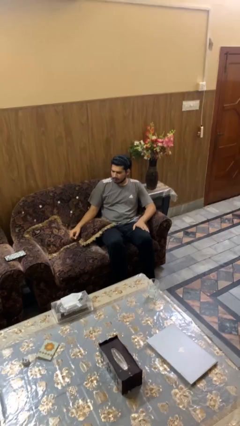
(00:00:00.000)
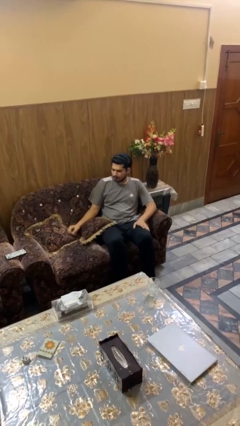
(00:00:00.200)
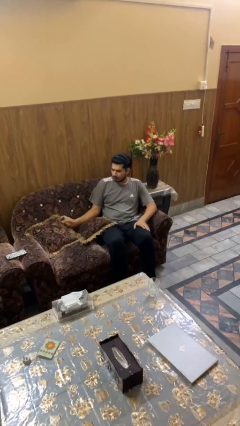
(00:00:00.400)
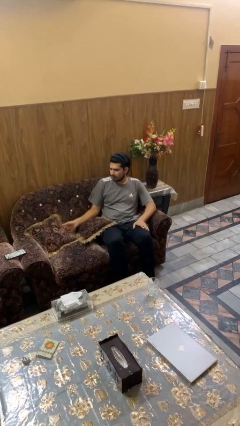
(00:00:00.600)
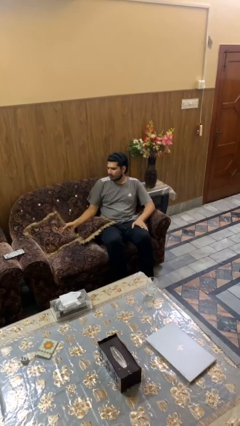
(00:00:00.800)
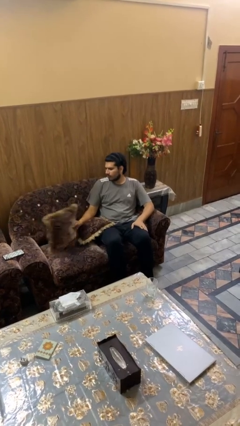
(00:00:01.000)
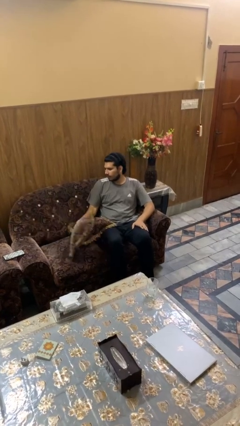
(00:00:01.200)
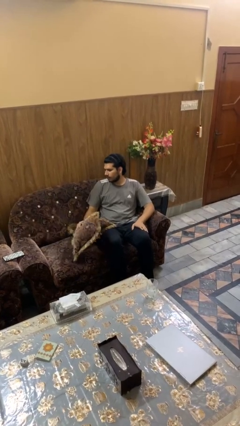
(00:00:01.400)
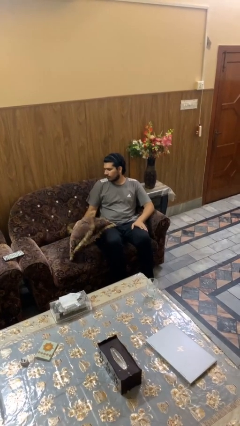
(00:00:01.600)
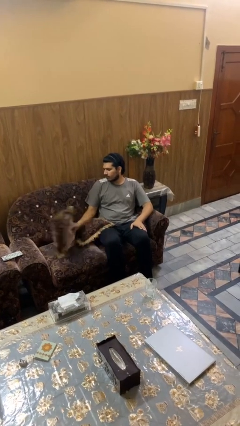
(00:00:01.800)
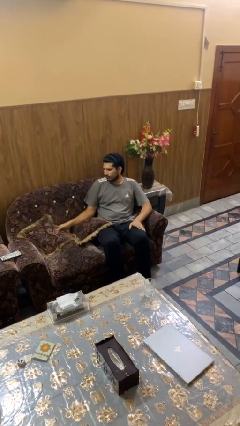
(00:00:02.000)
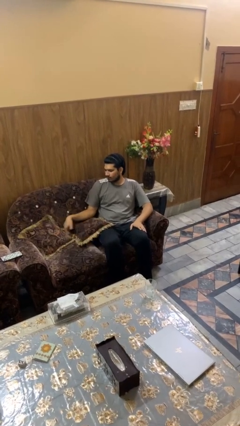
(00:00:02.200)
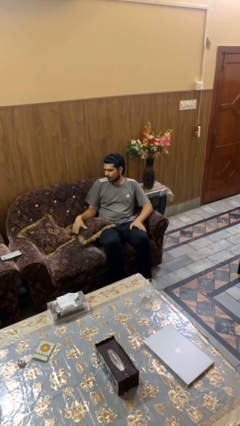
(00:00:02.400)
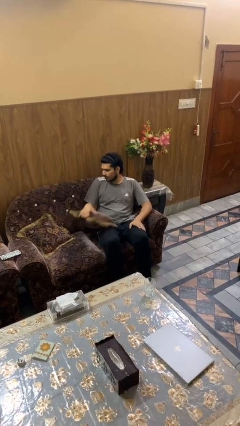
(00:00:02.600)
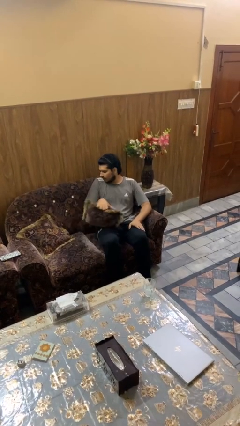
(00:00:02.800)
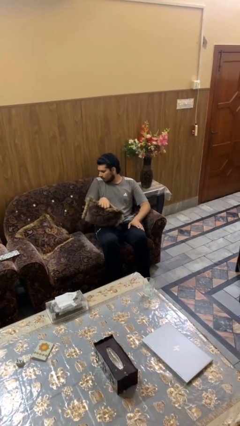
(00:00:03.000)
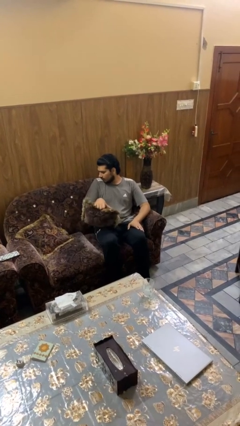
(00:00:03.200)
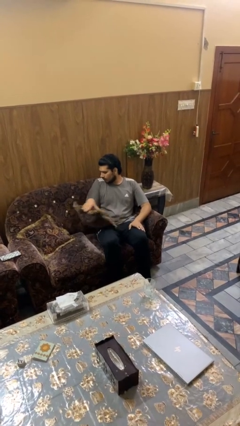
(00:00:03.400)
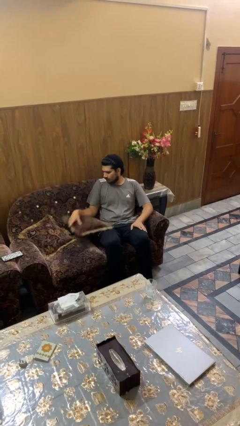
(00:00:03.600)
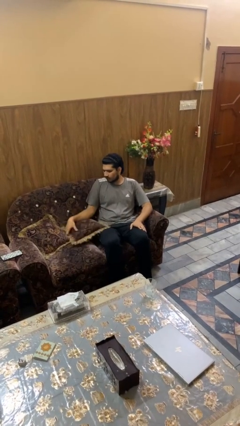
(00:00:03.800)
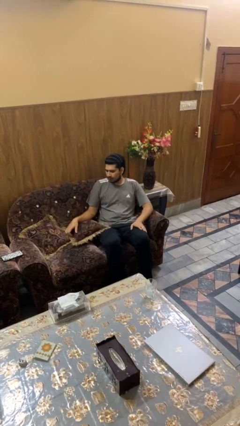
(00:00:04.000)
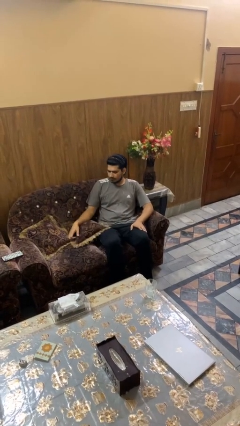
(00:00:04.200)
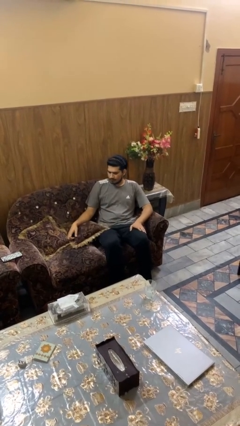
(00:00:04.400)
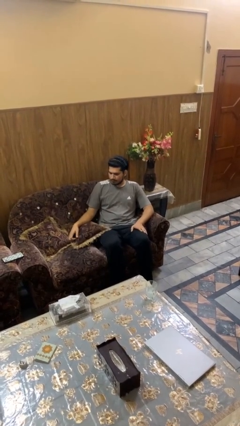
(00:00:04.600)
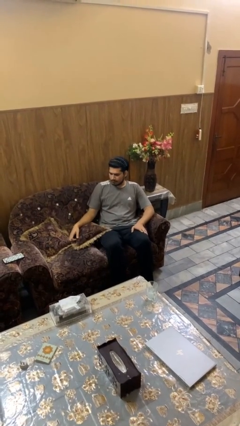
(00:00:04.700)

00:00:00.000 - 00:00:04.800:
person searches in couch

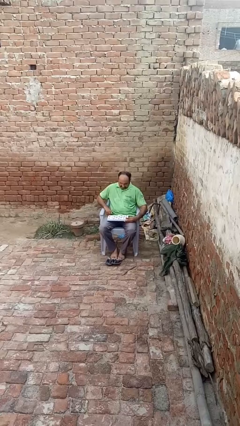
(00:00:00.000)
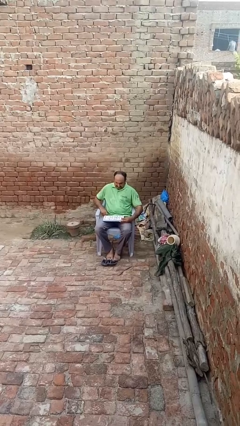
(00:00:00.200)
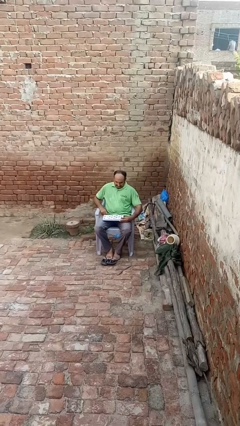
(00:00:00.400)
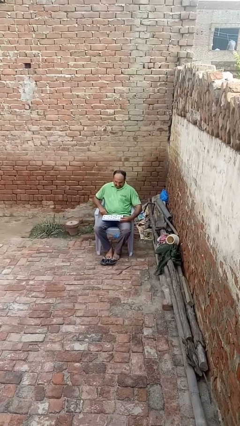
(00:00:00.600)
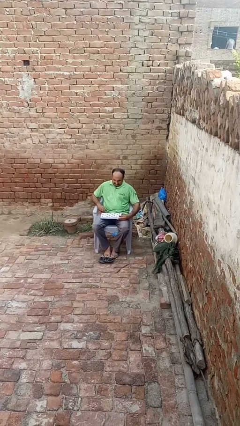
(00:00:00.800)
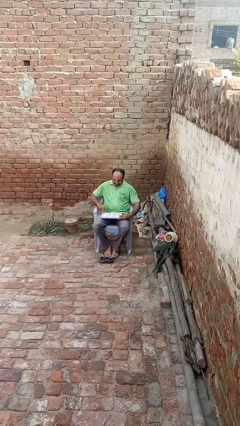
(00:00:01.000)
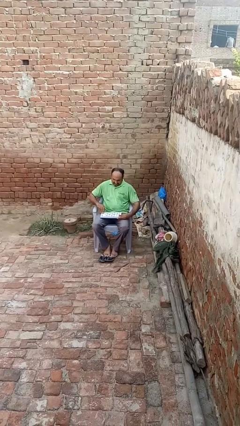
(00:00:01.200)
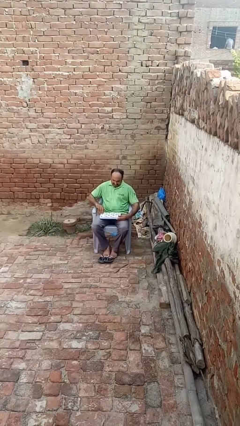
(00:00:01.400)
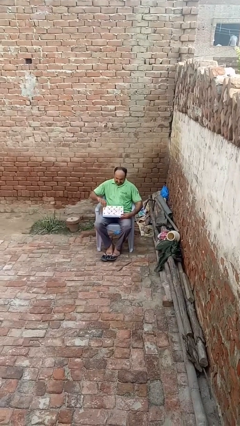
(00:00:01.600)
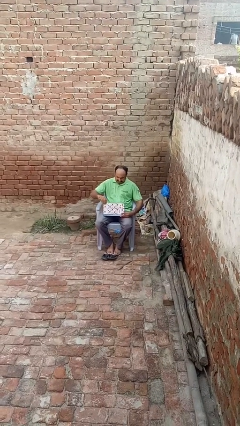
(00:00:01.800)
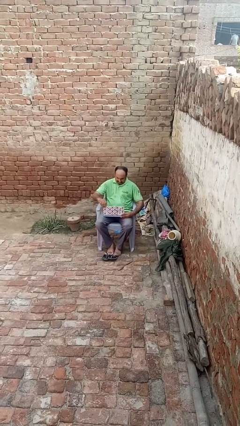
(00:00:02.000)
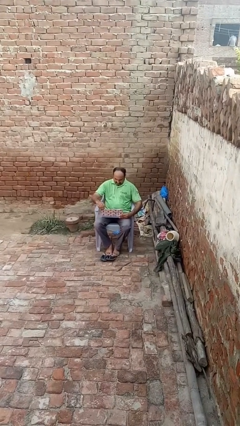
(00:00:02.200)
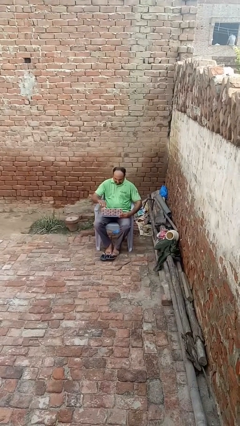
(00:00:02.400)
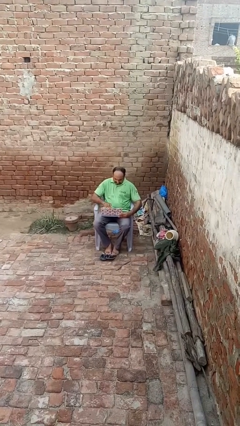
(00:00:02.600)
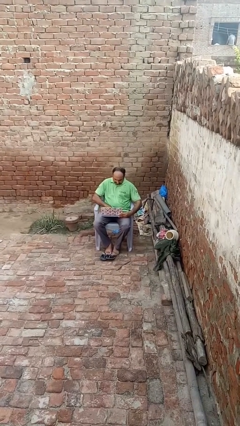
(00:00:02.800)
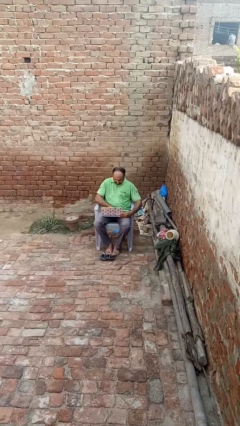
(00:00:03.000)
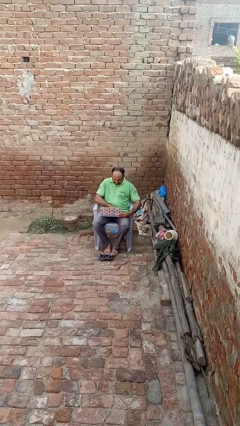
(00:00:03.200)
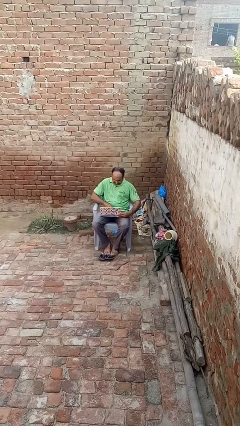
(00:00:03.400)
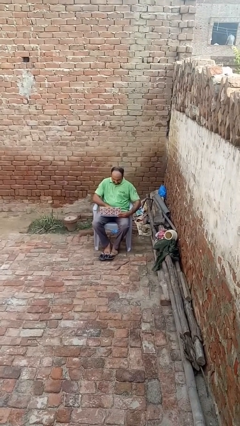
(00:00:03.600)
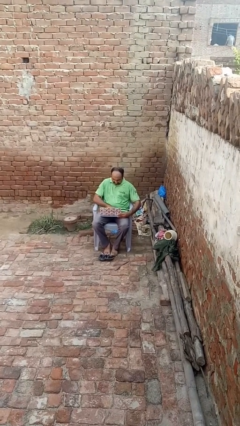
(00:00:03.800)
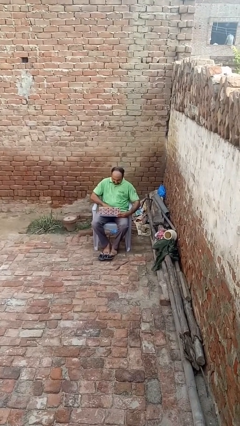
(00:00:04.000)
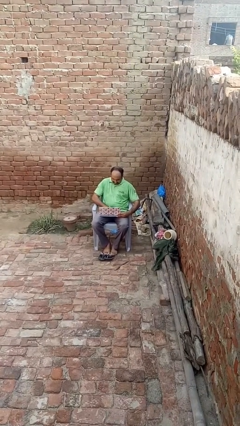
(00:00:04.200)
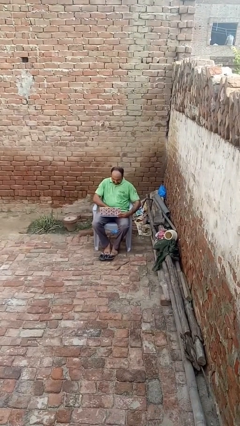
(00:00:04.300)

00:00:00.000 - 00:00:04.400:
person opens laptop

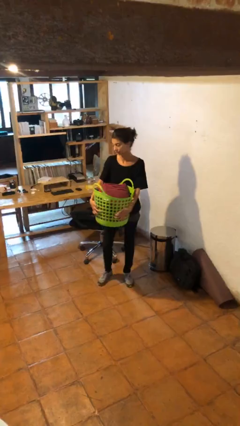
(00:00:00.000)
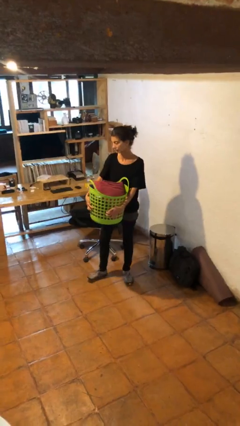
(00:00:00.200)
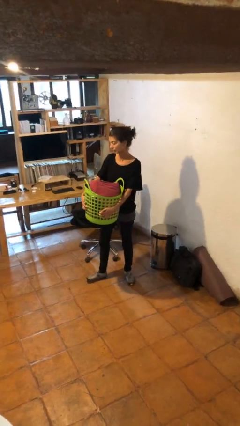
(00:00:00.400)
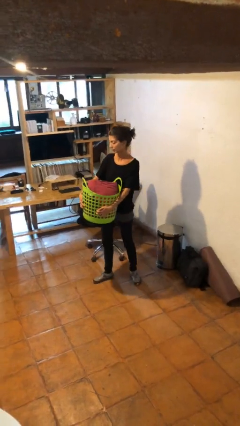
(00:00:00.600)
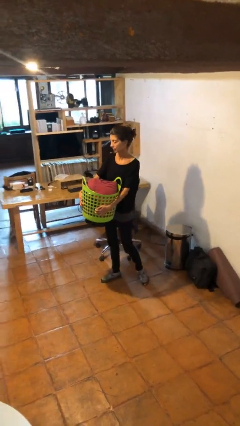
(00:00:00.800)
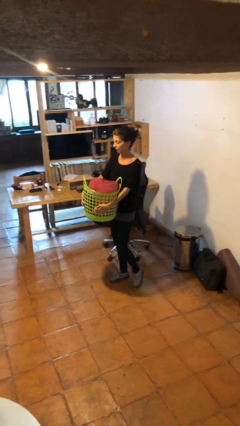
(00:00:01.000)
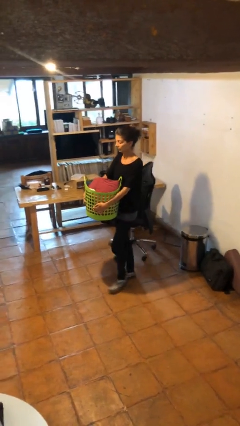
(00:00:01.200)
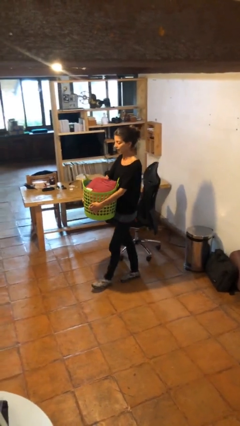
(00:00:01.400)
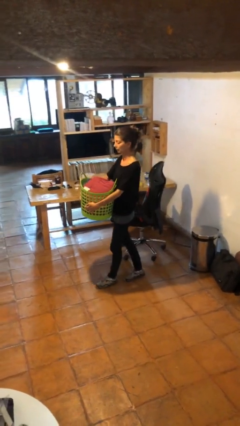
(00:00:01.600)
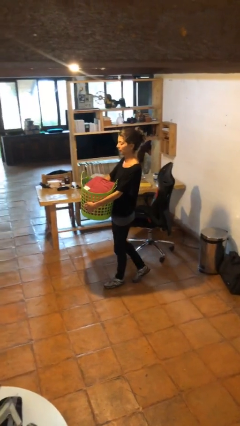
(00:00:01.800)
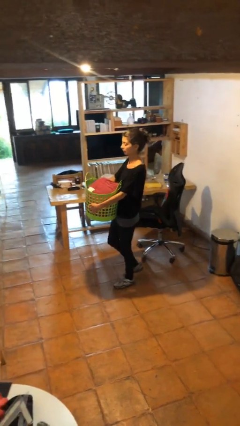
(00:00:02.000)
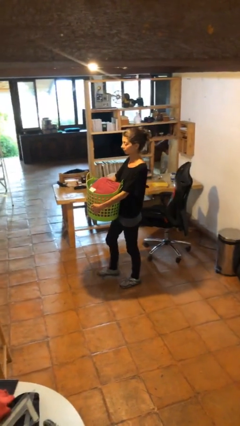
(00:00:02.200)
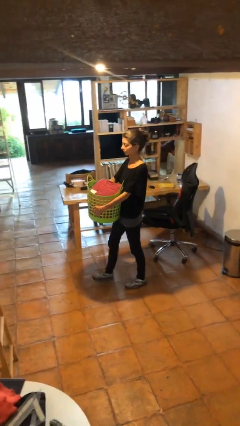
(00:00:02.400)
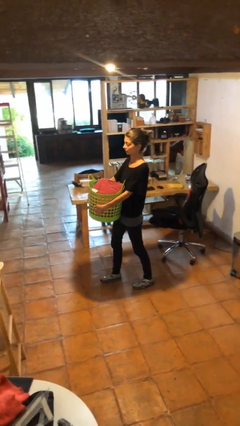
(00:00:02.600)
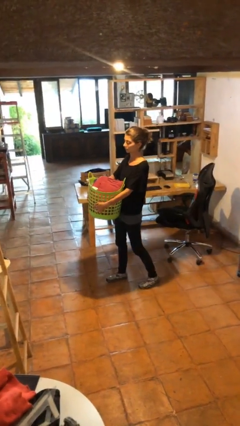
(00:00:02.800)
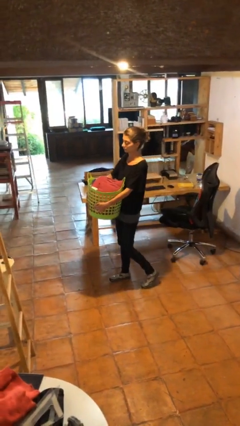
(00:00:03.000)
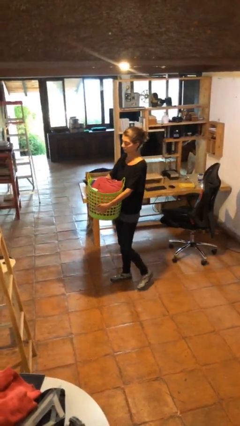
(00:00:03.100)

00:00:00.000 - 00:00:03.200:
person carries laundry basket

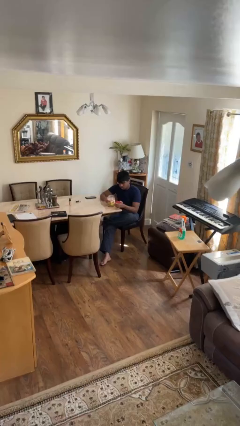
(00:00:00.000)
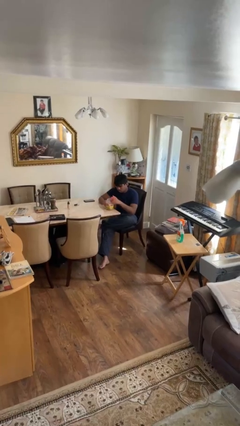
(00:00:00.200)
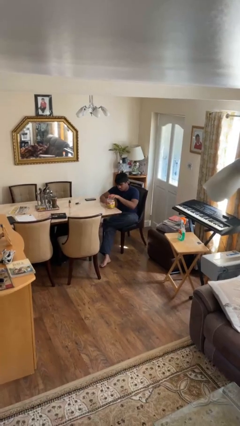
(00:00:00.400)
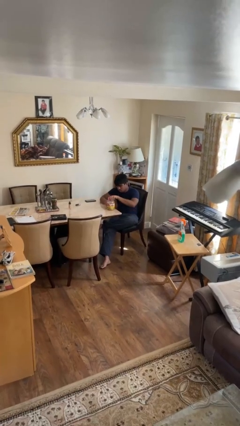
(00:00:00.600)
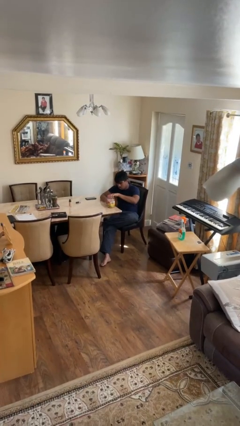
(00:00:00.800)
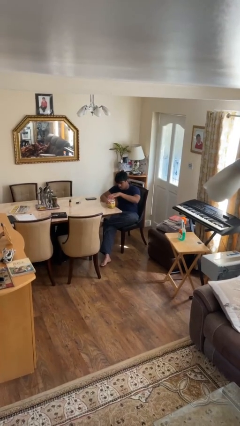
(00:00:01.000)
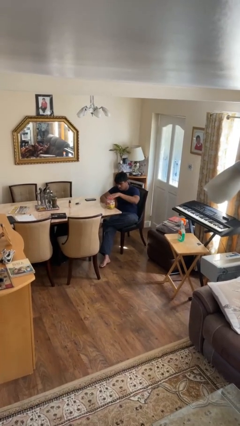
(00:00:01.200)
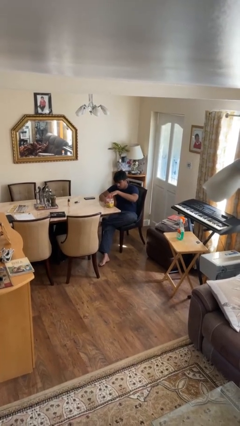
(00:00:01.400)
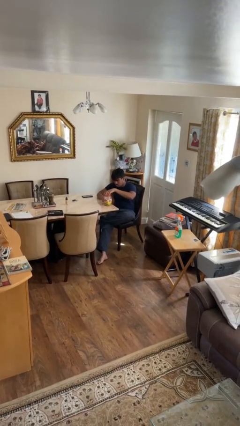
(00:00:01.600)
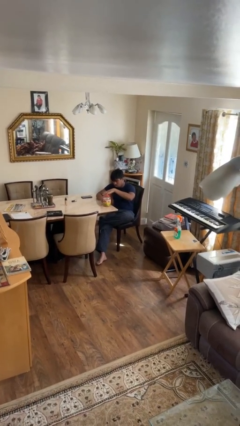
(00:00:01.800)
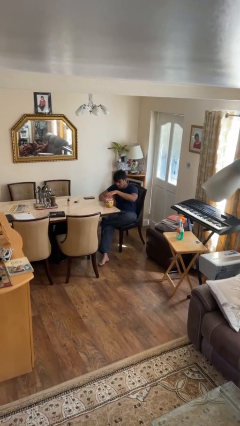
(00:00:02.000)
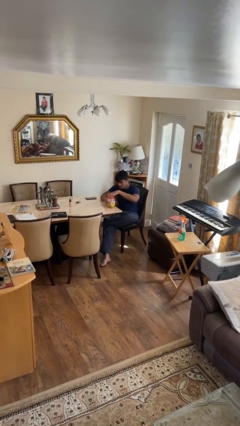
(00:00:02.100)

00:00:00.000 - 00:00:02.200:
person closes jar

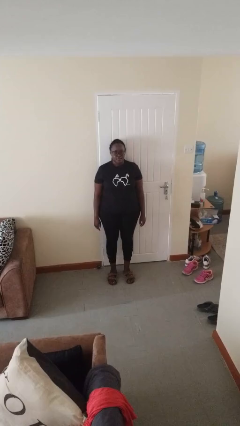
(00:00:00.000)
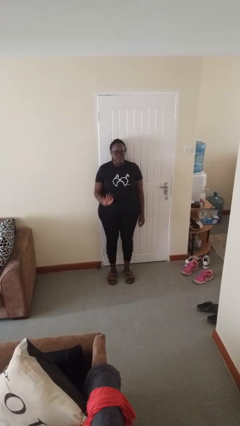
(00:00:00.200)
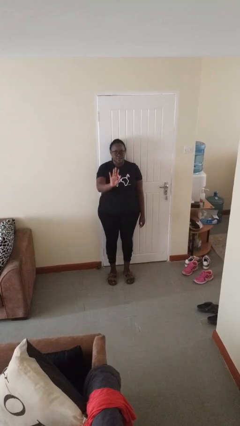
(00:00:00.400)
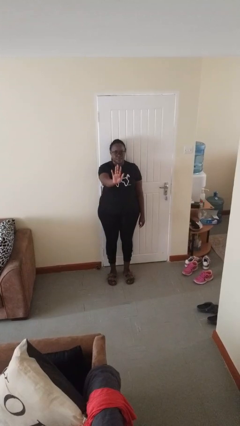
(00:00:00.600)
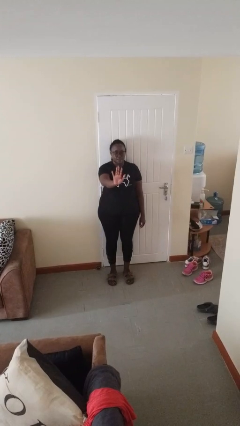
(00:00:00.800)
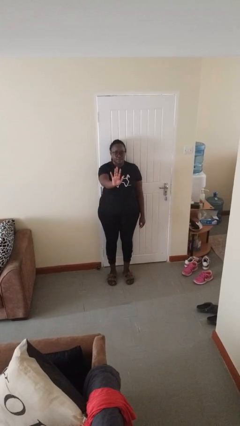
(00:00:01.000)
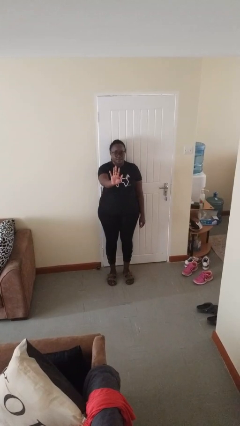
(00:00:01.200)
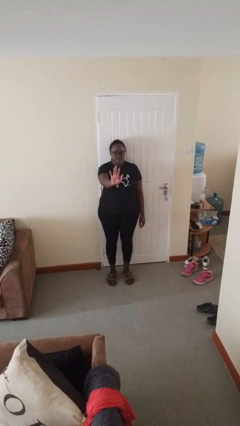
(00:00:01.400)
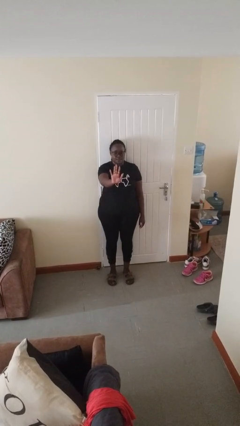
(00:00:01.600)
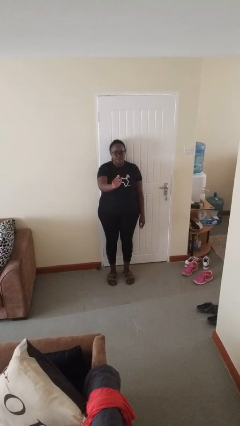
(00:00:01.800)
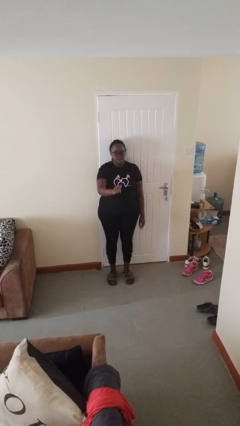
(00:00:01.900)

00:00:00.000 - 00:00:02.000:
person gestures number five

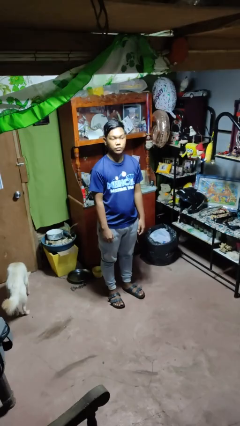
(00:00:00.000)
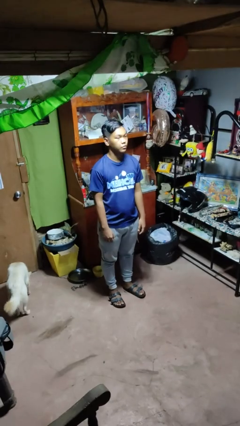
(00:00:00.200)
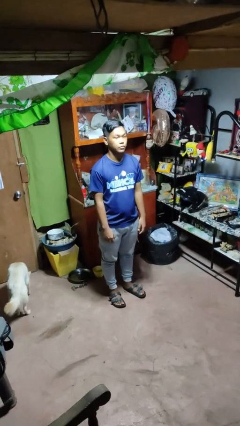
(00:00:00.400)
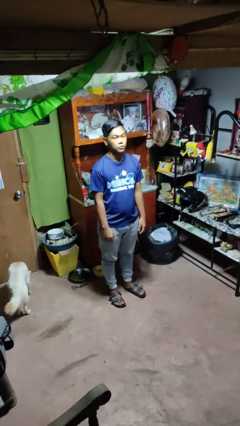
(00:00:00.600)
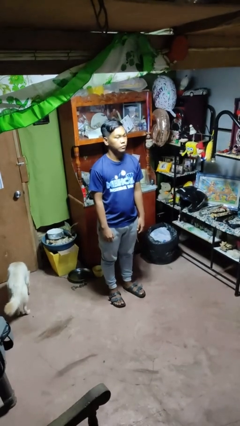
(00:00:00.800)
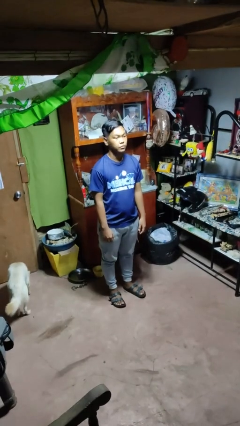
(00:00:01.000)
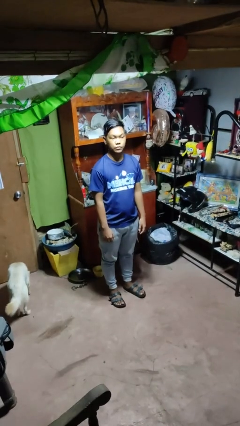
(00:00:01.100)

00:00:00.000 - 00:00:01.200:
person shakes head
